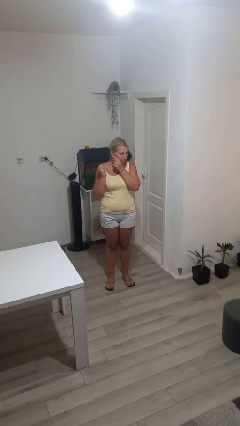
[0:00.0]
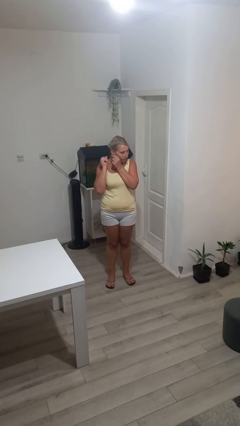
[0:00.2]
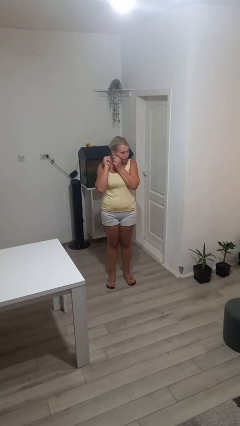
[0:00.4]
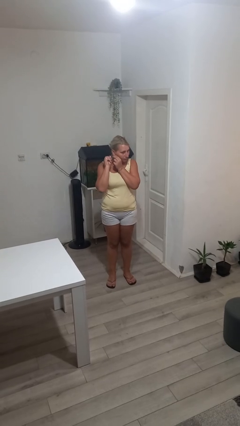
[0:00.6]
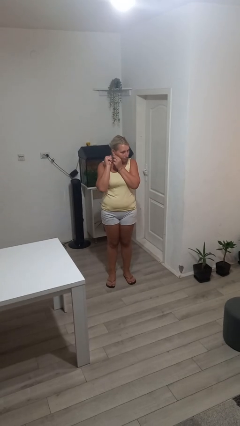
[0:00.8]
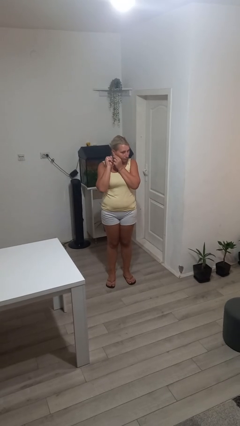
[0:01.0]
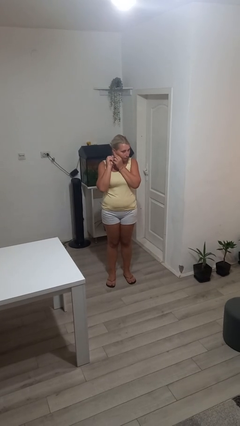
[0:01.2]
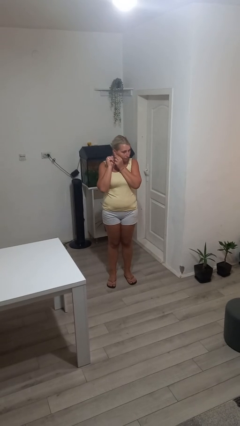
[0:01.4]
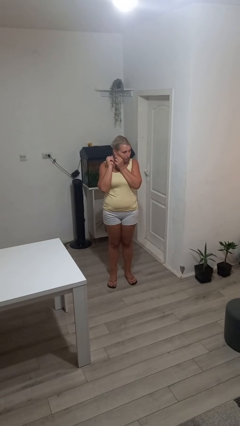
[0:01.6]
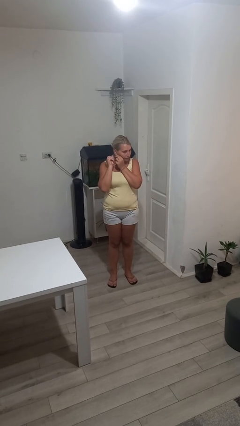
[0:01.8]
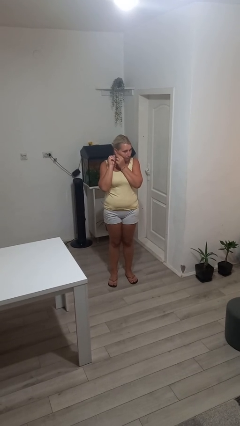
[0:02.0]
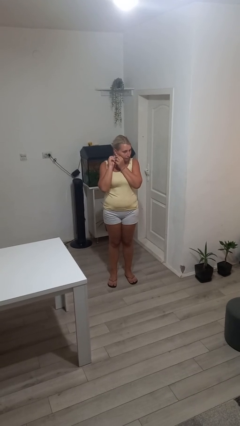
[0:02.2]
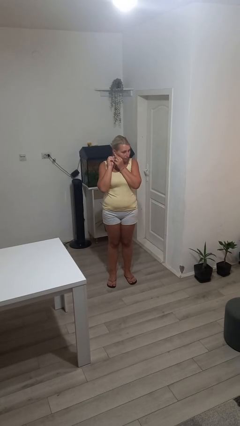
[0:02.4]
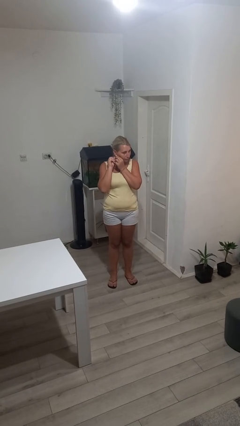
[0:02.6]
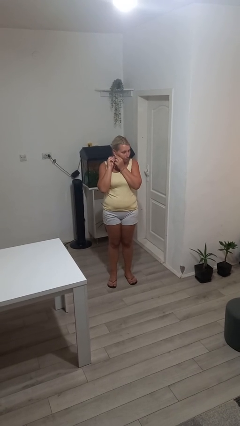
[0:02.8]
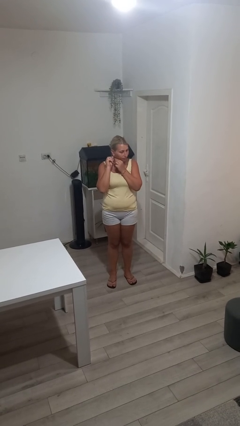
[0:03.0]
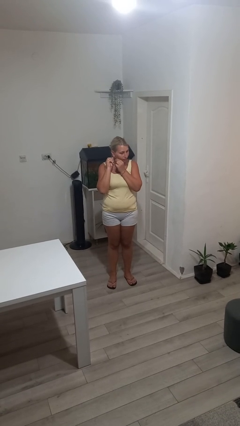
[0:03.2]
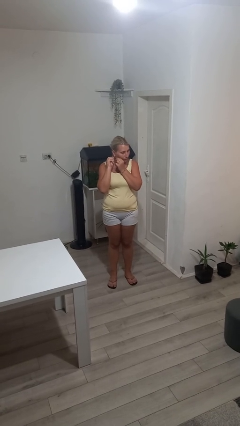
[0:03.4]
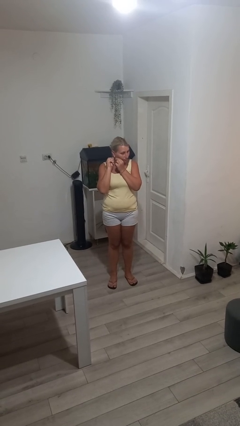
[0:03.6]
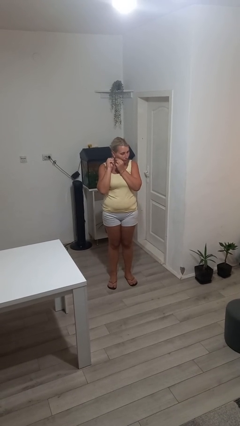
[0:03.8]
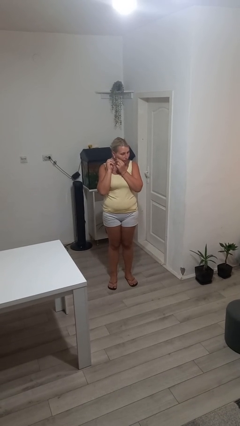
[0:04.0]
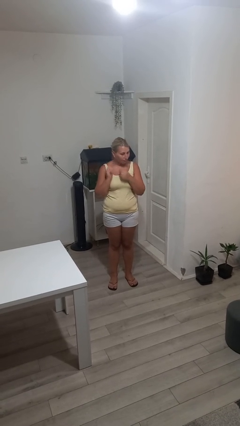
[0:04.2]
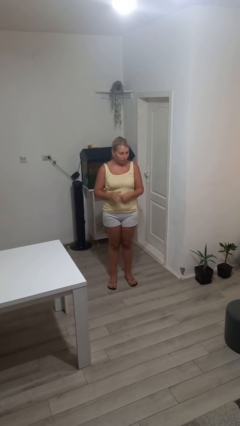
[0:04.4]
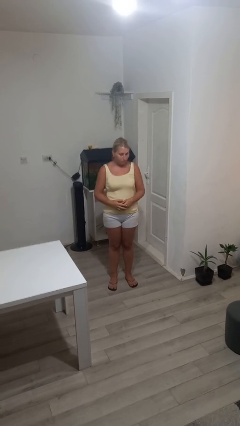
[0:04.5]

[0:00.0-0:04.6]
person puts on earrings

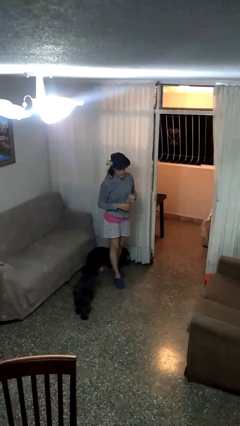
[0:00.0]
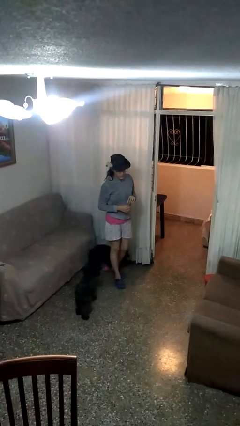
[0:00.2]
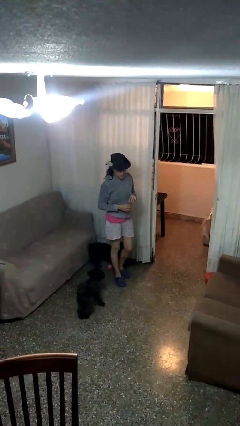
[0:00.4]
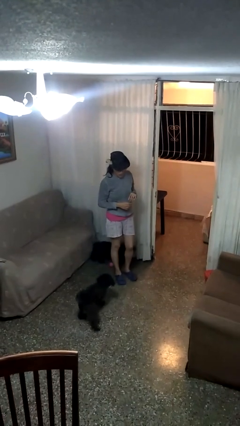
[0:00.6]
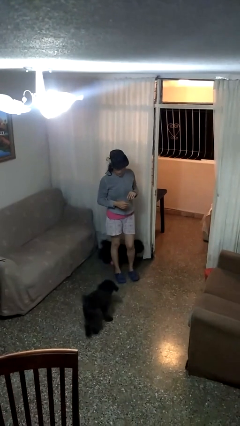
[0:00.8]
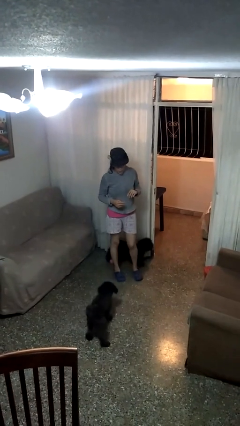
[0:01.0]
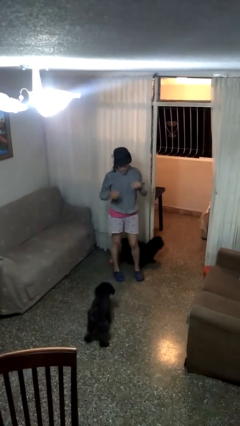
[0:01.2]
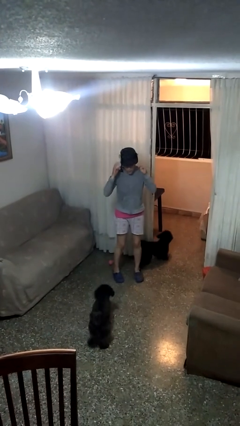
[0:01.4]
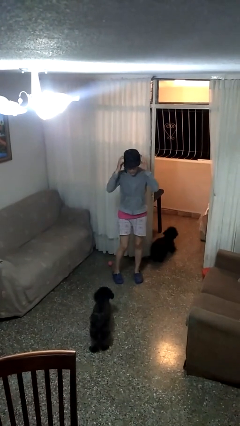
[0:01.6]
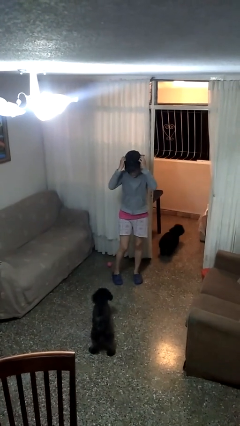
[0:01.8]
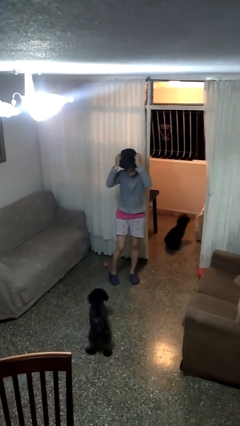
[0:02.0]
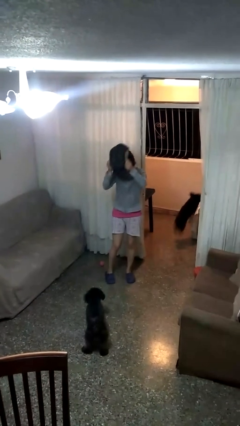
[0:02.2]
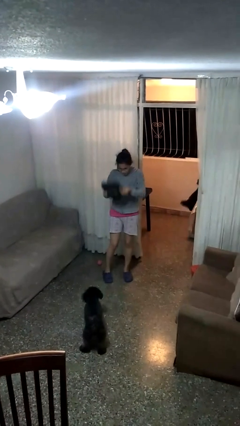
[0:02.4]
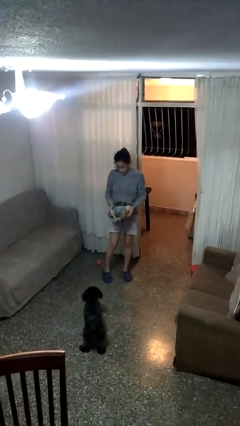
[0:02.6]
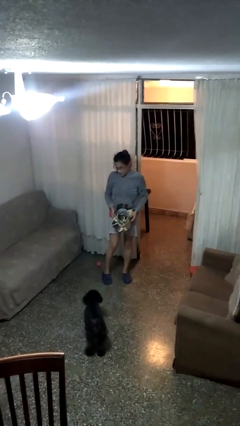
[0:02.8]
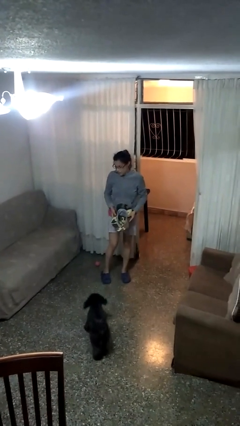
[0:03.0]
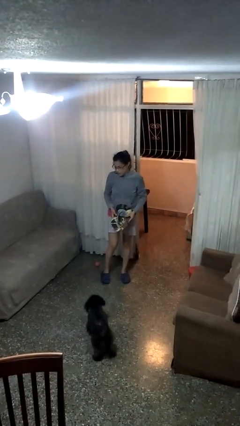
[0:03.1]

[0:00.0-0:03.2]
person takes off hat

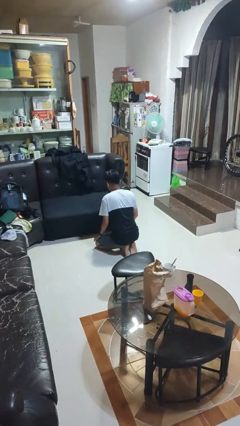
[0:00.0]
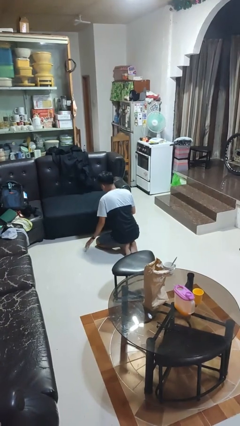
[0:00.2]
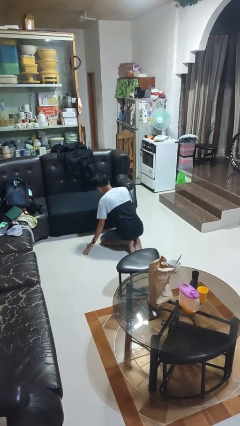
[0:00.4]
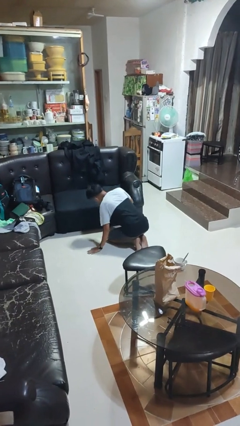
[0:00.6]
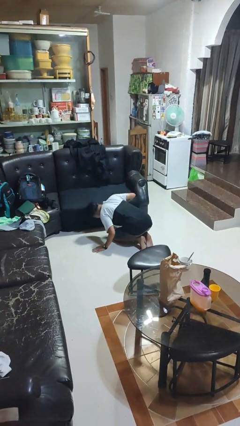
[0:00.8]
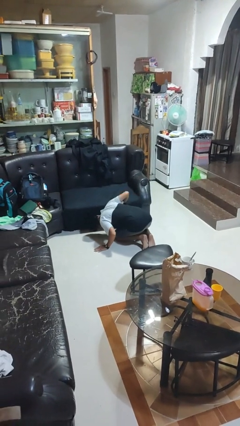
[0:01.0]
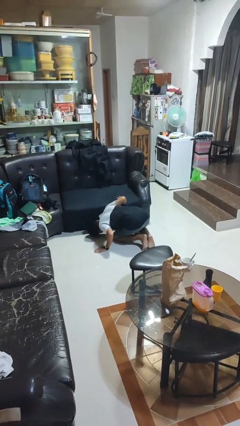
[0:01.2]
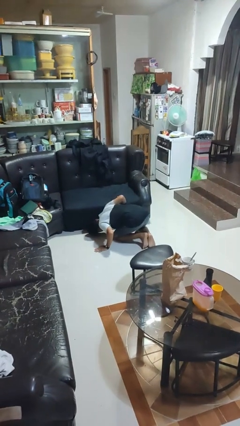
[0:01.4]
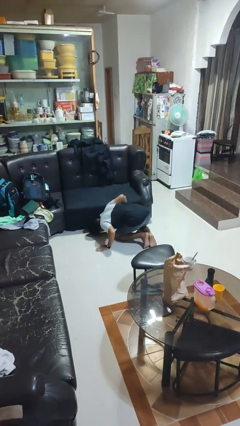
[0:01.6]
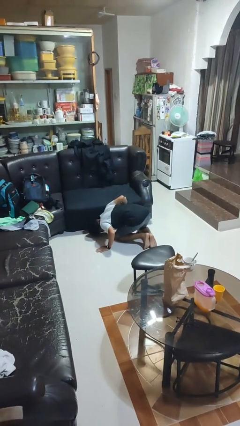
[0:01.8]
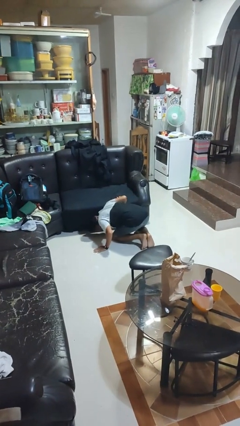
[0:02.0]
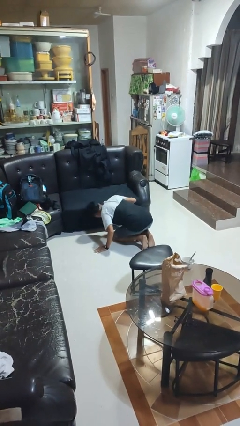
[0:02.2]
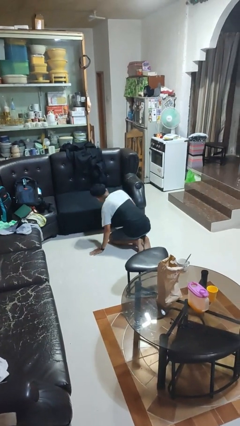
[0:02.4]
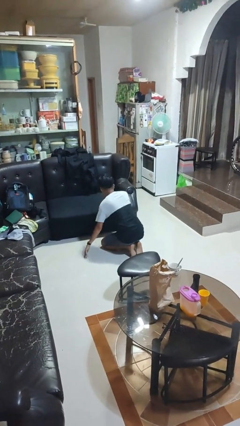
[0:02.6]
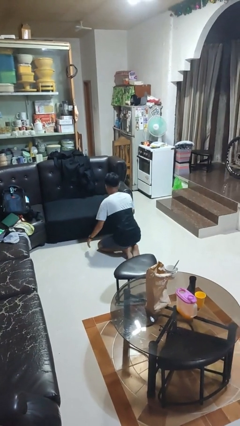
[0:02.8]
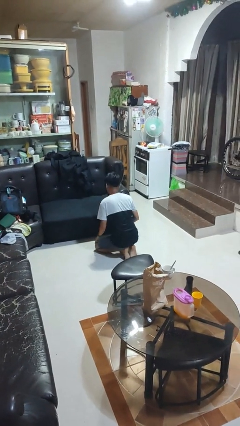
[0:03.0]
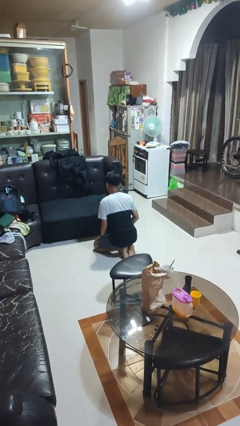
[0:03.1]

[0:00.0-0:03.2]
person searches under couch

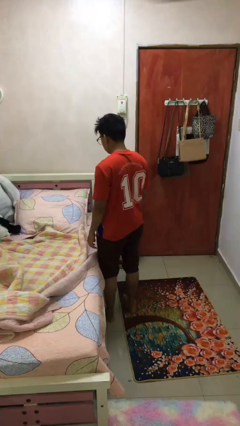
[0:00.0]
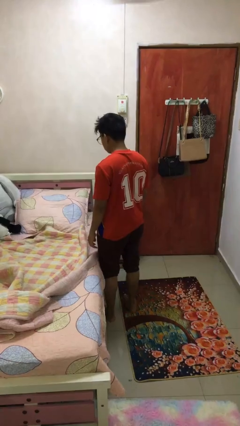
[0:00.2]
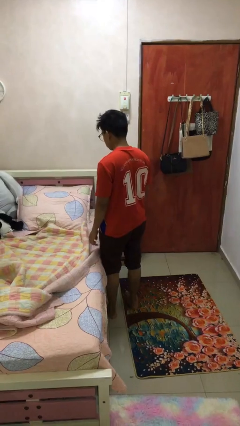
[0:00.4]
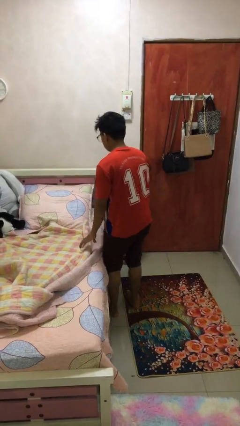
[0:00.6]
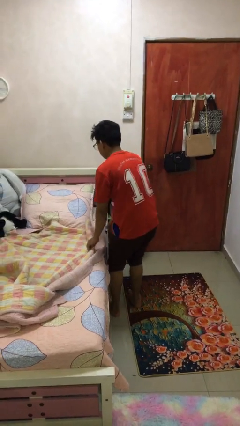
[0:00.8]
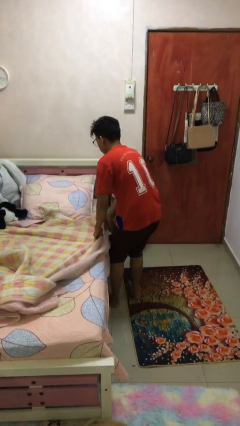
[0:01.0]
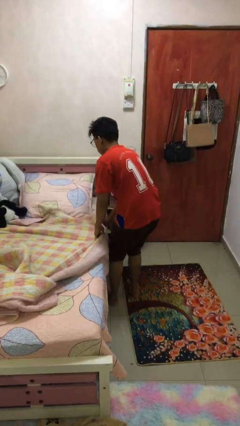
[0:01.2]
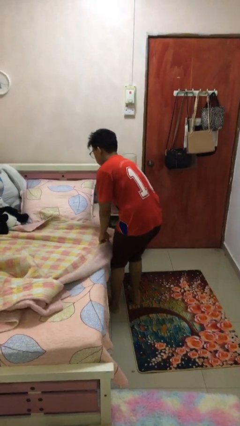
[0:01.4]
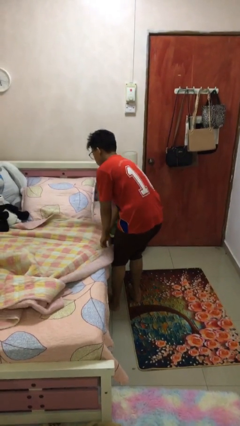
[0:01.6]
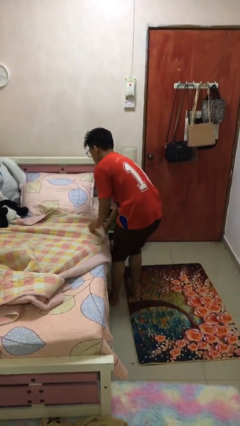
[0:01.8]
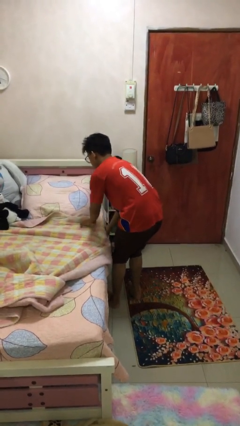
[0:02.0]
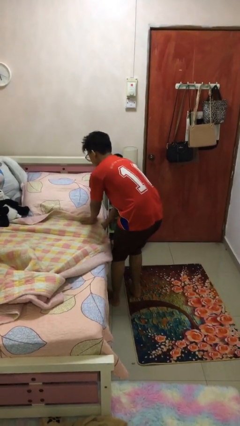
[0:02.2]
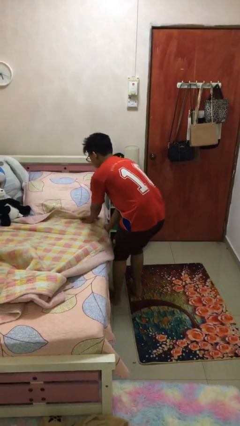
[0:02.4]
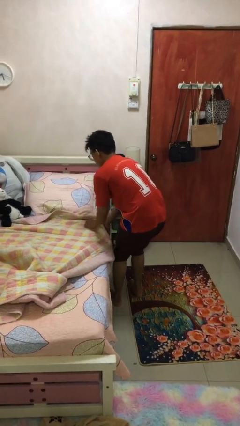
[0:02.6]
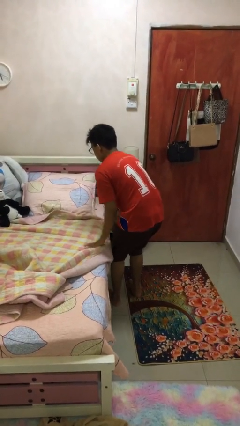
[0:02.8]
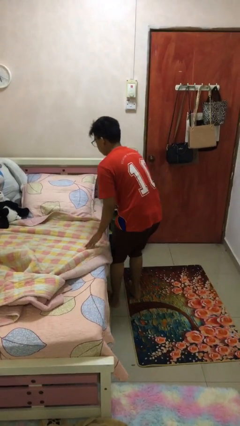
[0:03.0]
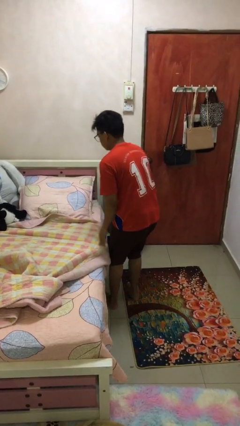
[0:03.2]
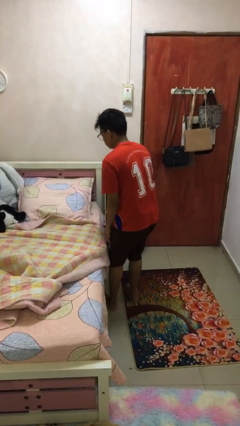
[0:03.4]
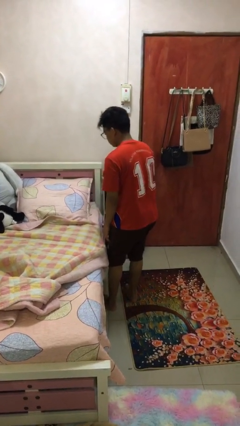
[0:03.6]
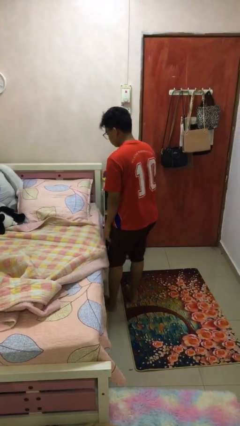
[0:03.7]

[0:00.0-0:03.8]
person makes bed

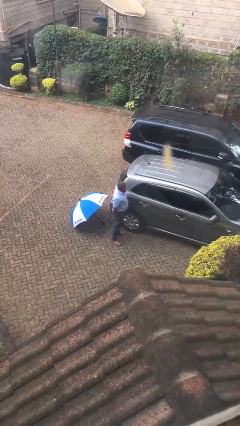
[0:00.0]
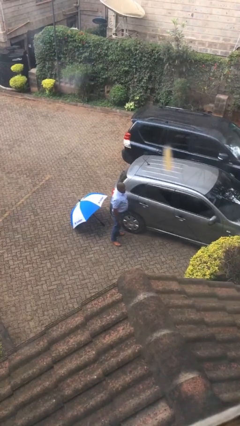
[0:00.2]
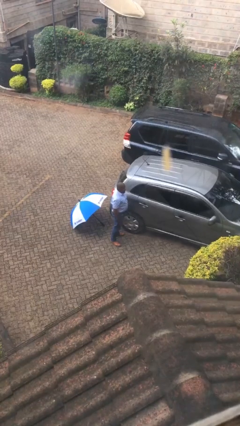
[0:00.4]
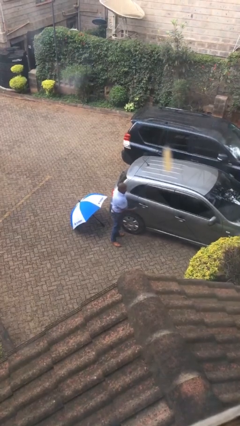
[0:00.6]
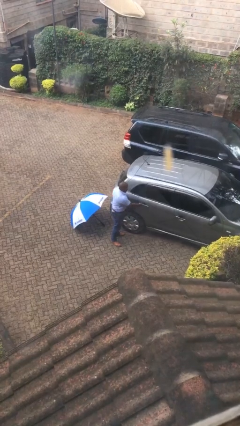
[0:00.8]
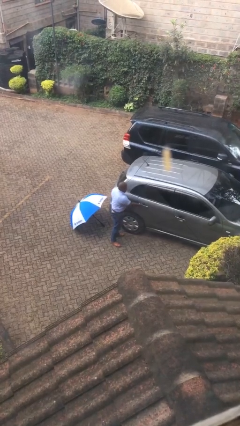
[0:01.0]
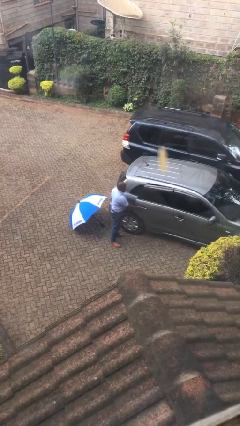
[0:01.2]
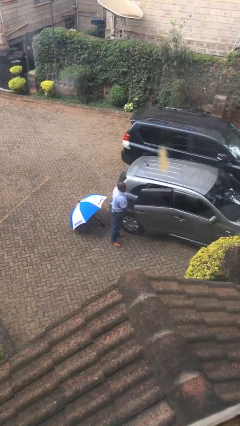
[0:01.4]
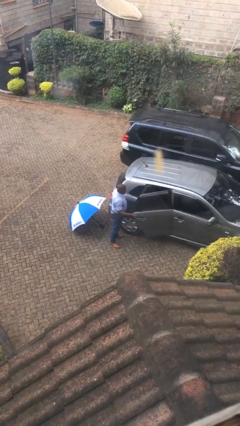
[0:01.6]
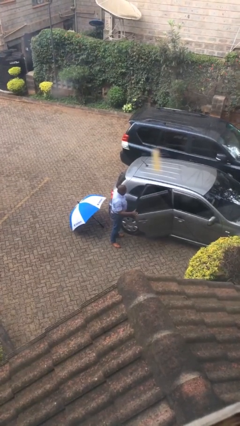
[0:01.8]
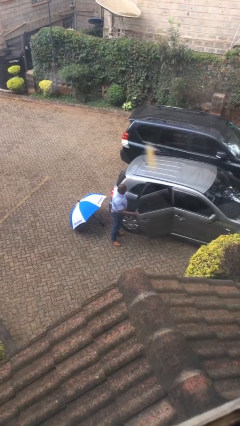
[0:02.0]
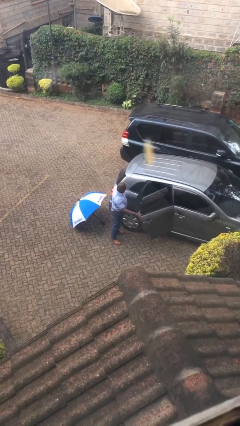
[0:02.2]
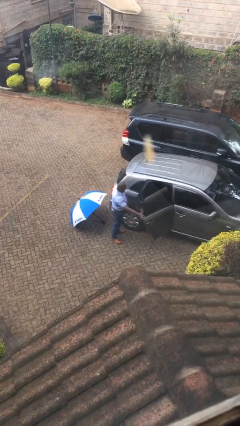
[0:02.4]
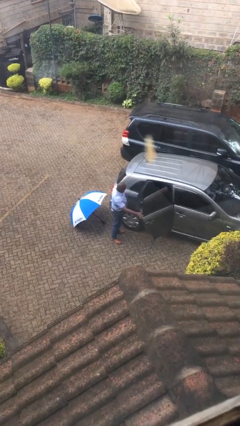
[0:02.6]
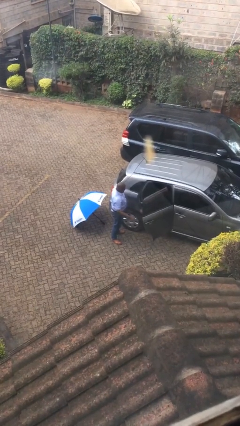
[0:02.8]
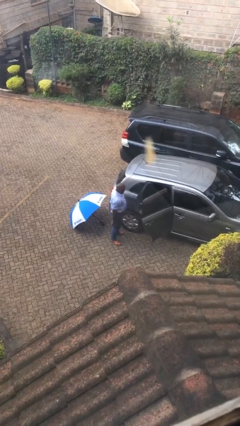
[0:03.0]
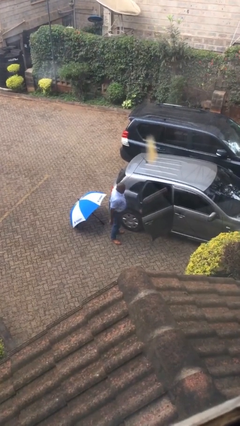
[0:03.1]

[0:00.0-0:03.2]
person opens car door
